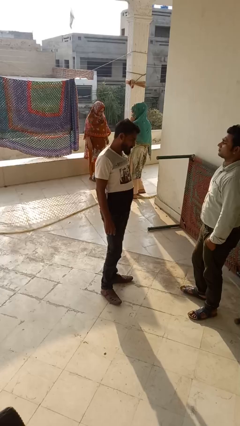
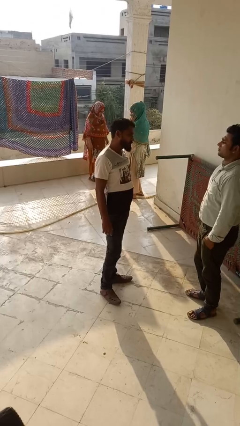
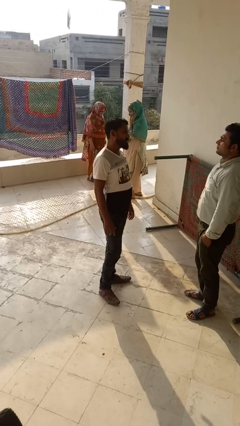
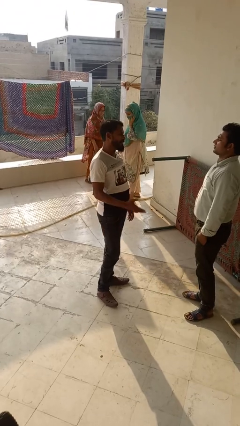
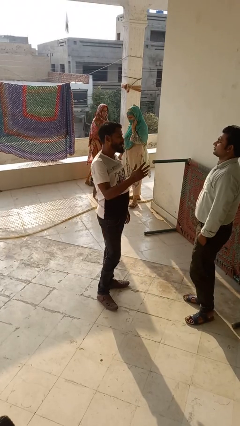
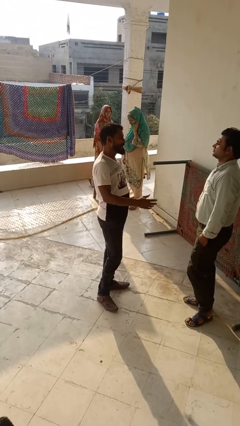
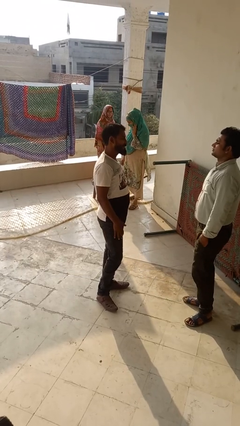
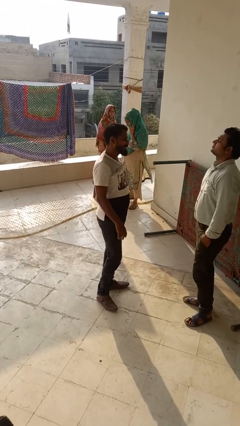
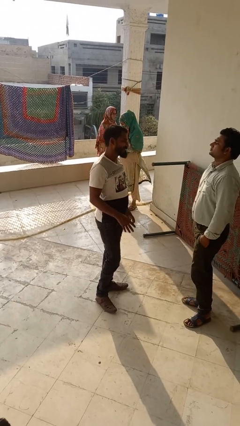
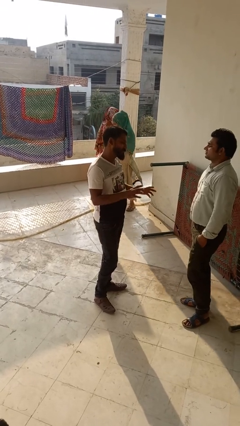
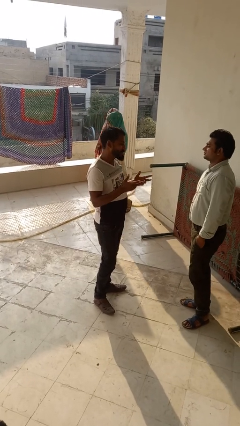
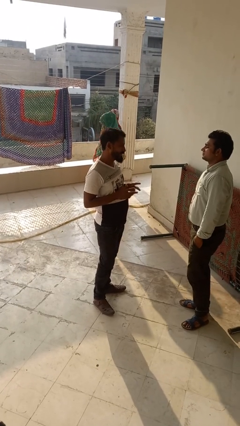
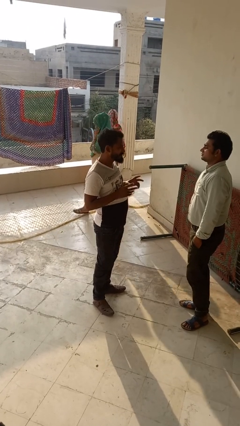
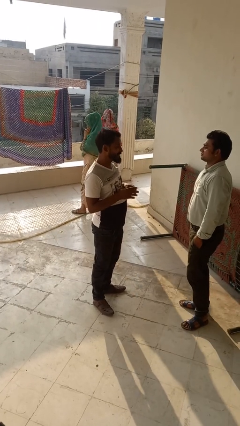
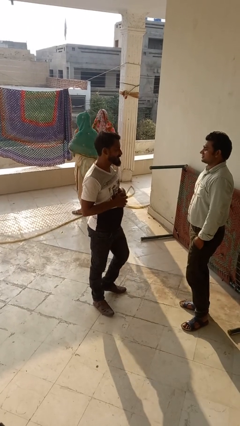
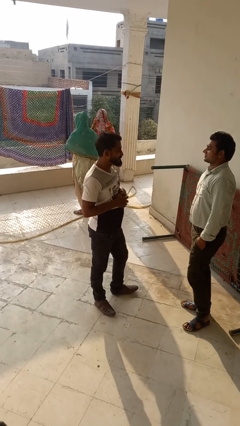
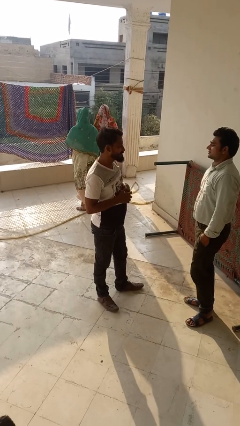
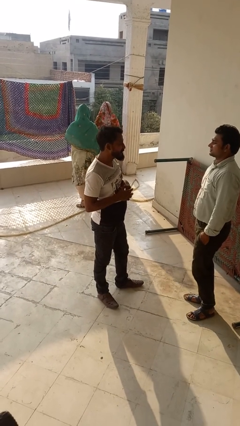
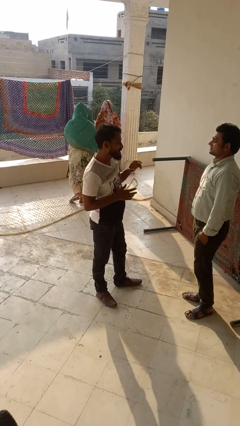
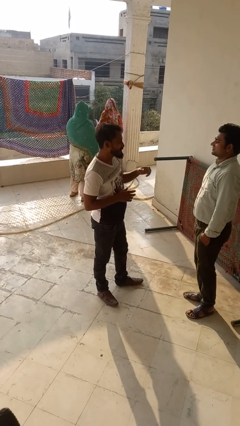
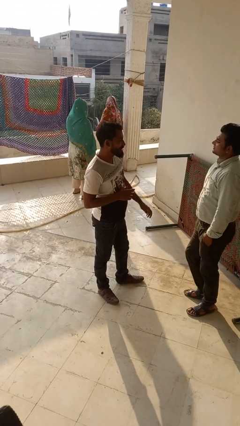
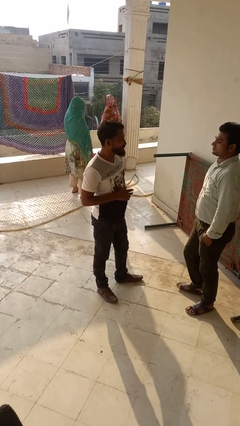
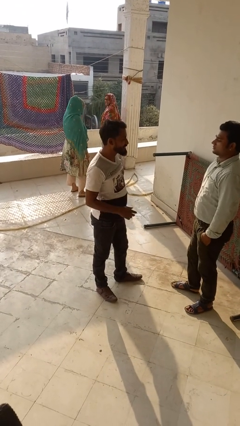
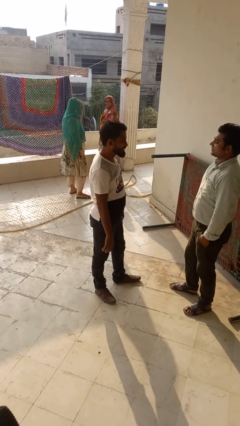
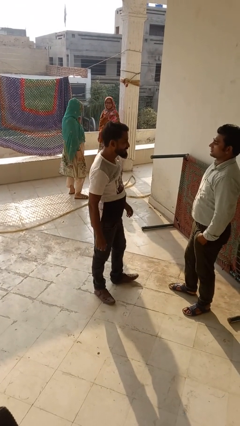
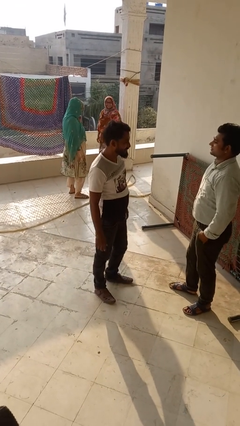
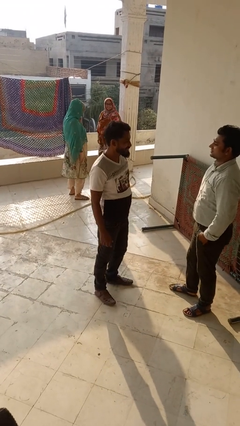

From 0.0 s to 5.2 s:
person talks to person

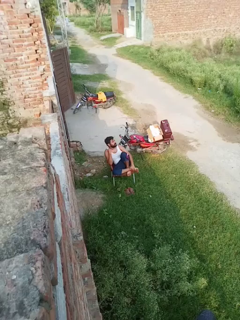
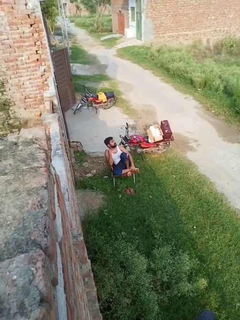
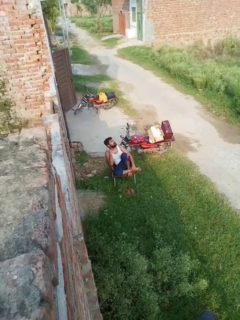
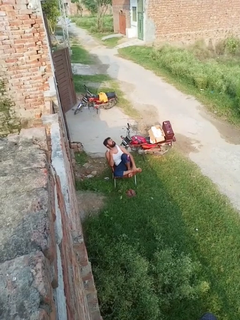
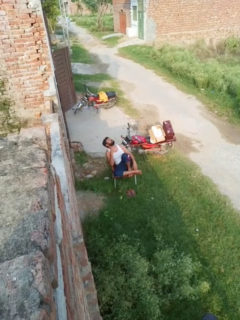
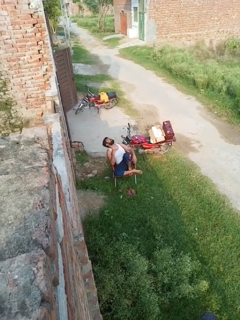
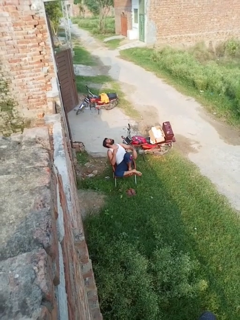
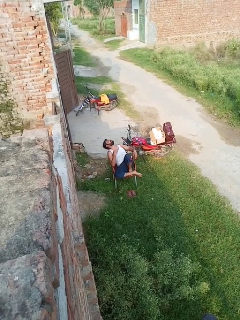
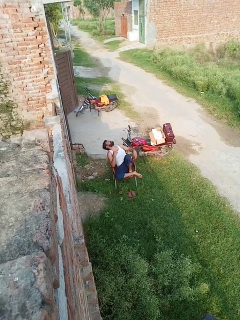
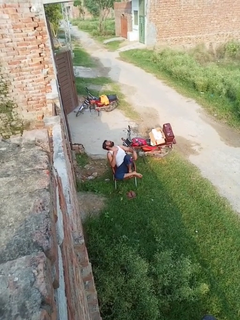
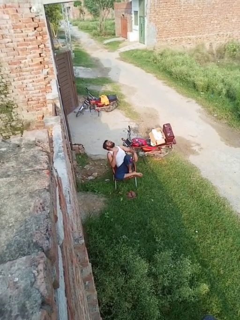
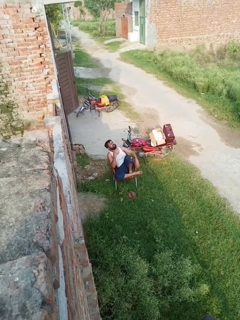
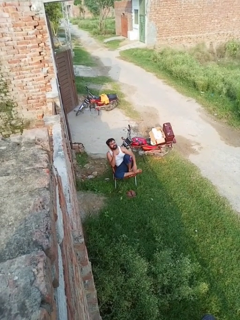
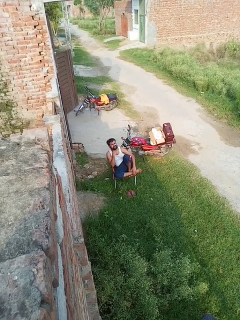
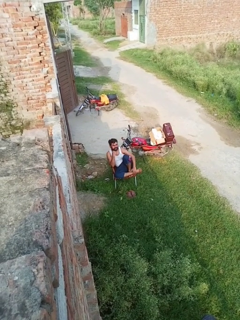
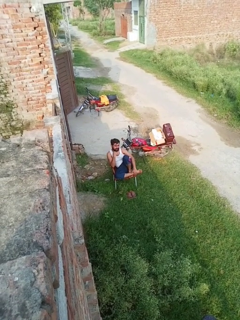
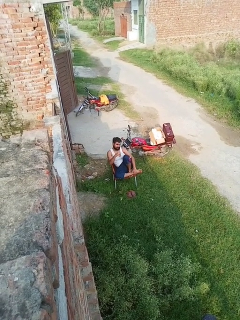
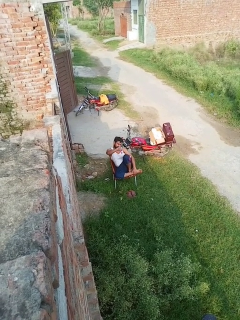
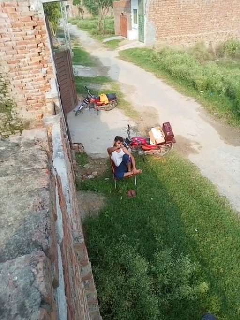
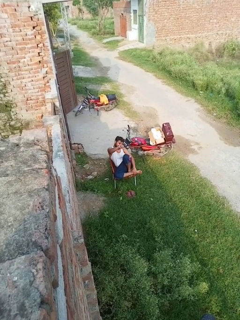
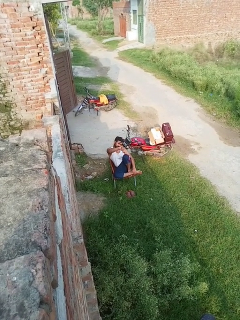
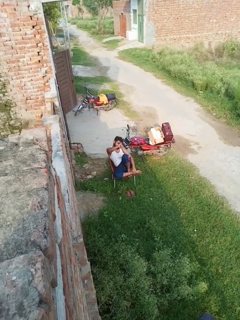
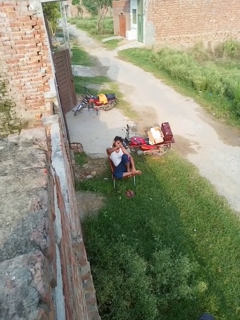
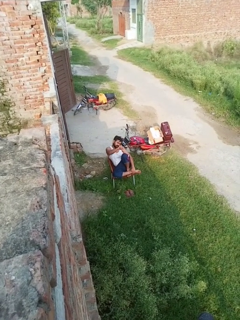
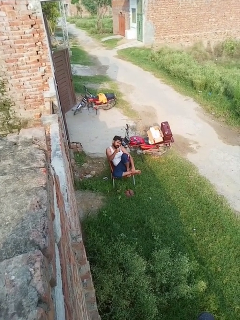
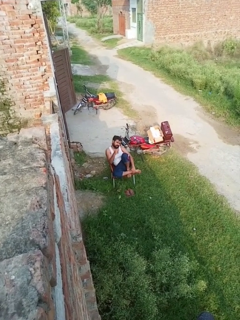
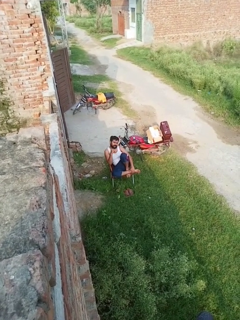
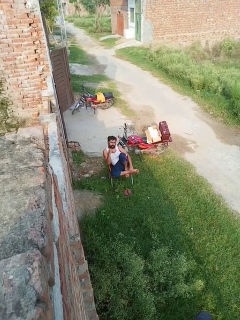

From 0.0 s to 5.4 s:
person gestures thumbs down

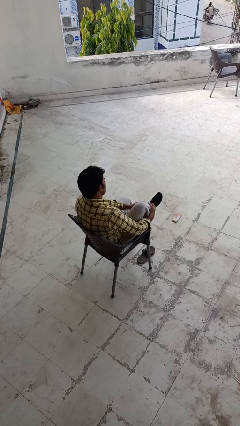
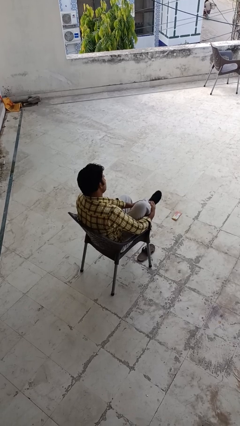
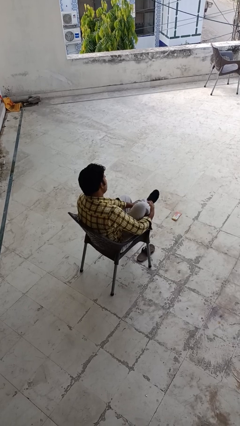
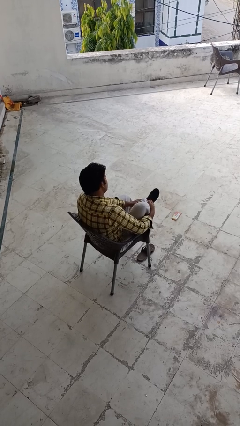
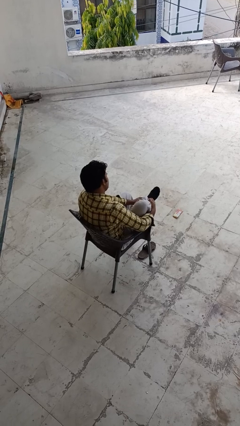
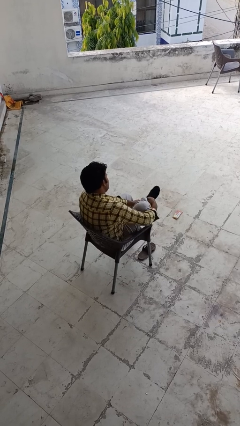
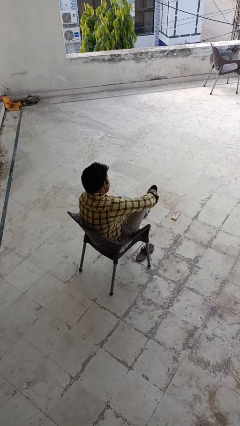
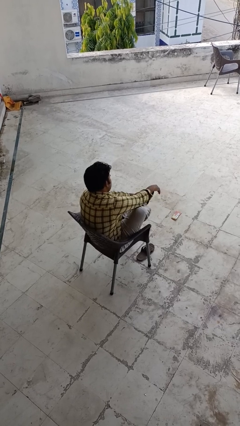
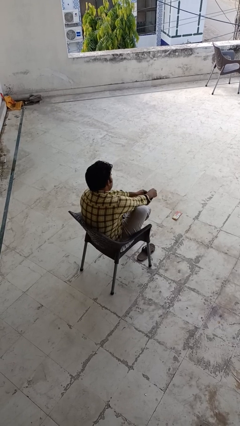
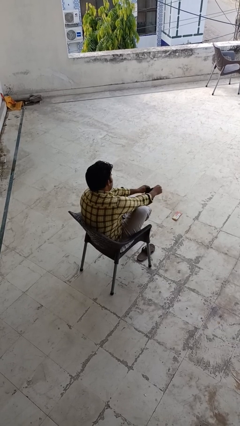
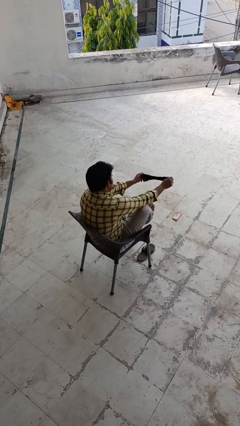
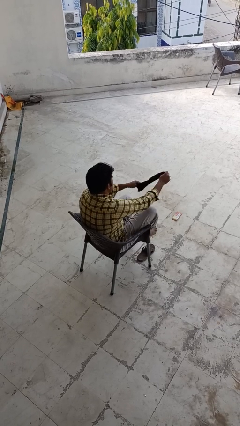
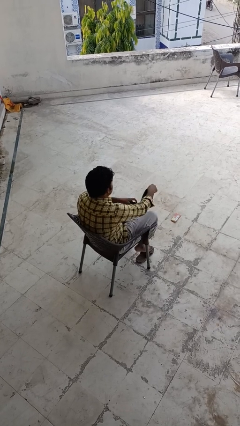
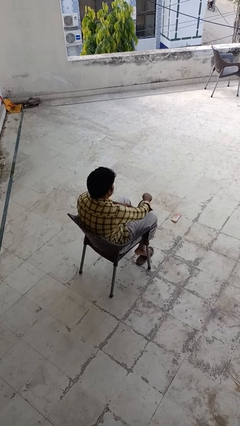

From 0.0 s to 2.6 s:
person takes off socks

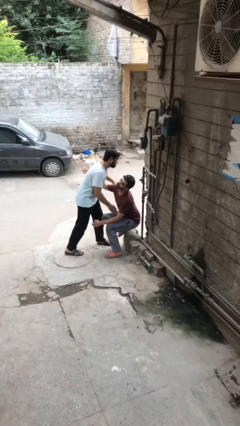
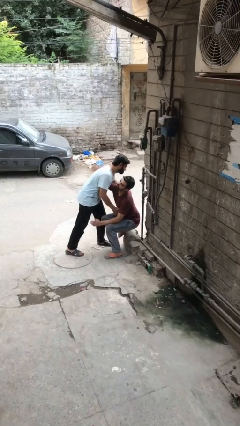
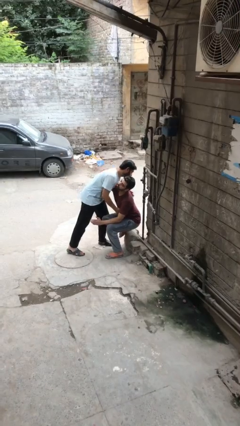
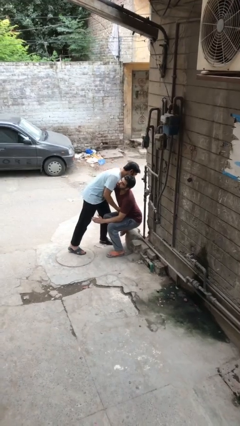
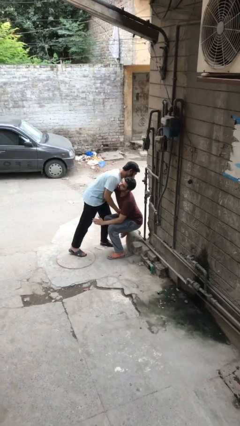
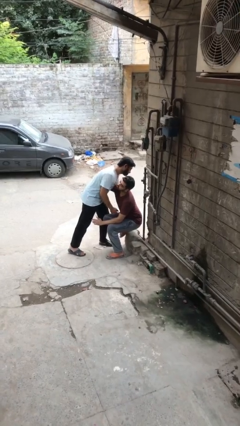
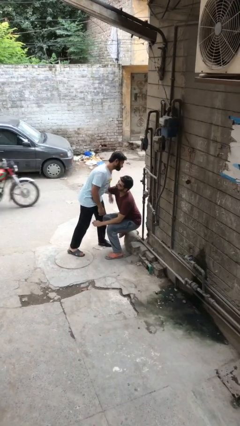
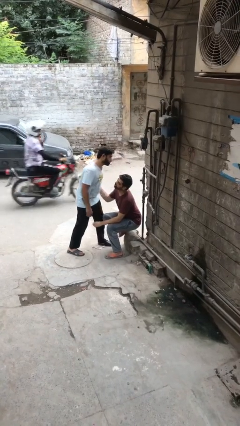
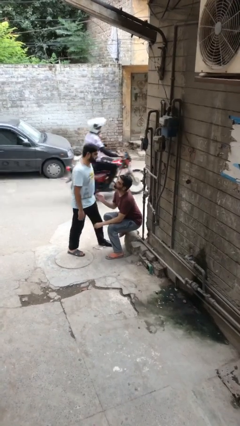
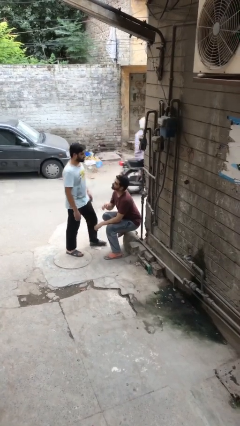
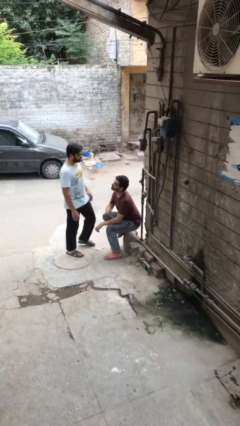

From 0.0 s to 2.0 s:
person embraces person

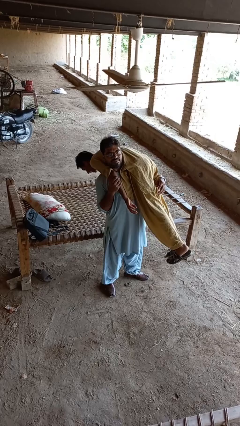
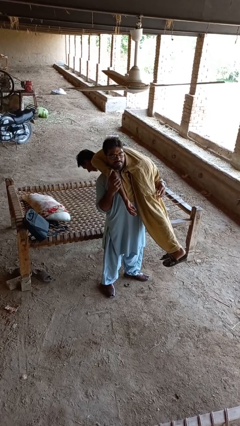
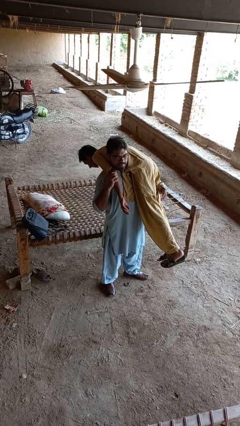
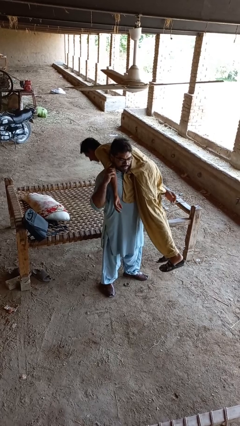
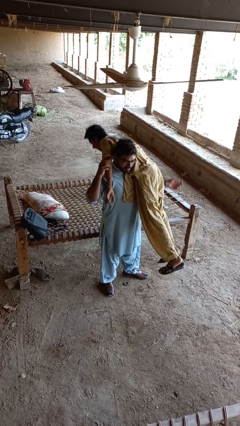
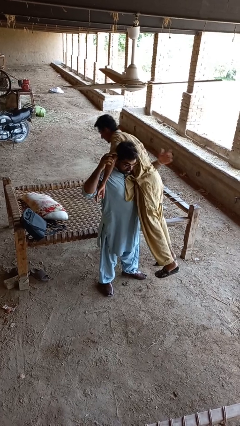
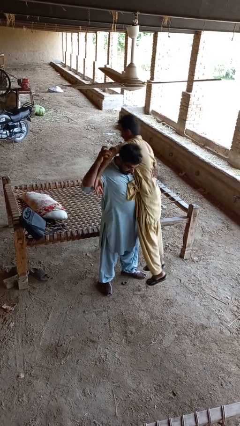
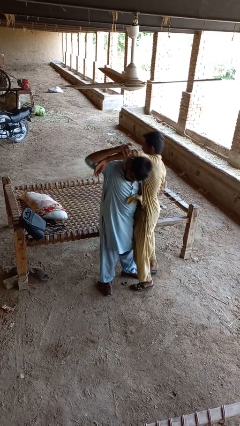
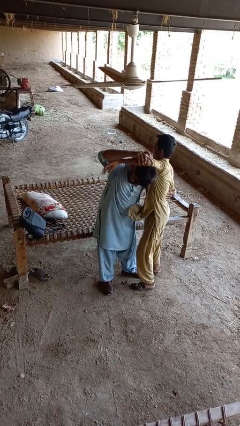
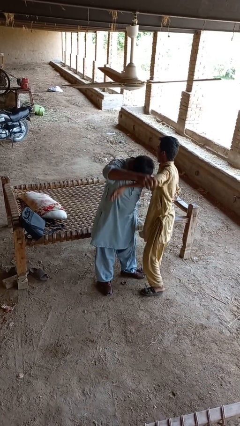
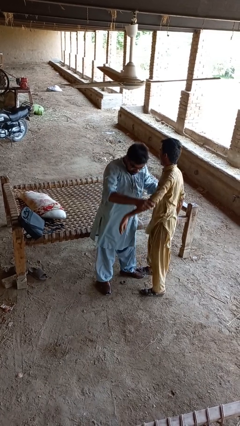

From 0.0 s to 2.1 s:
person puts down person

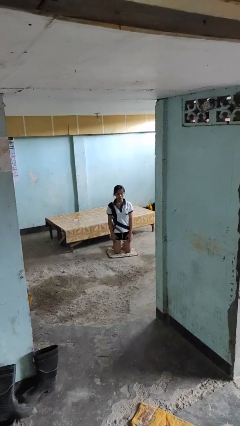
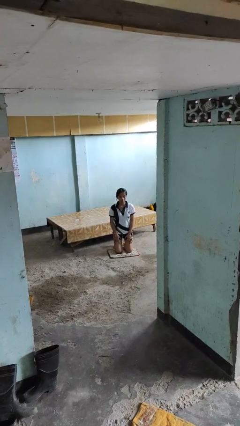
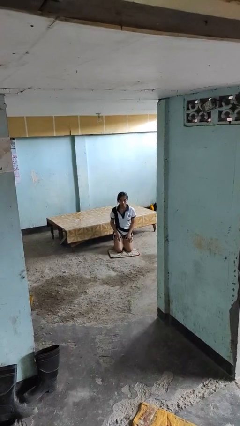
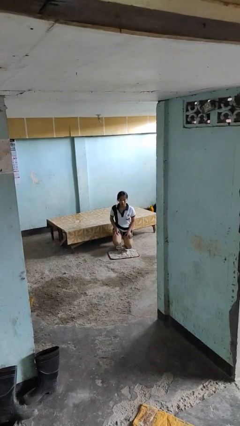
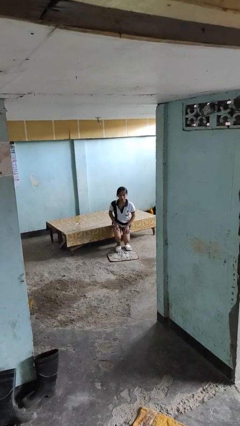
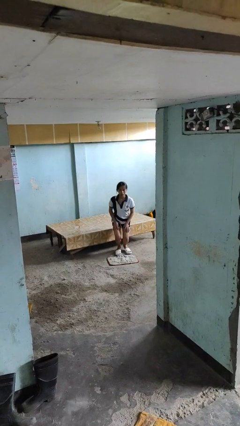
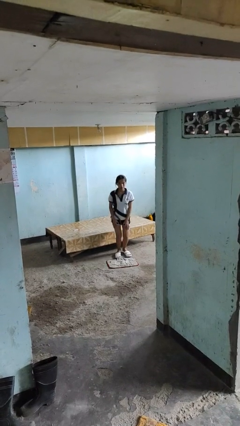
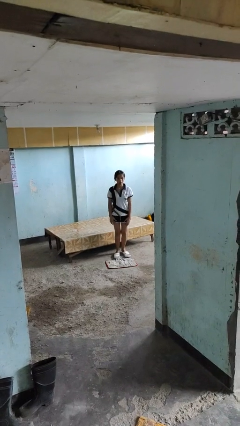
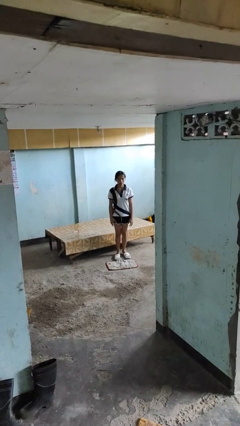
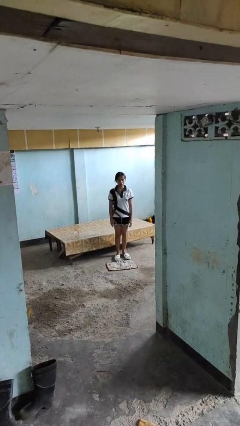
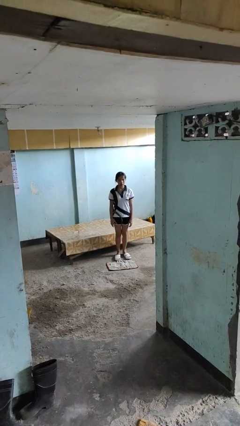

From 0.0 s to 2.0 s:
person stands up from floor
